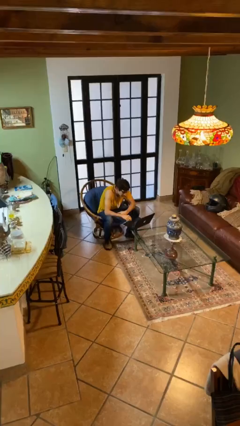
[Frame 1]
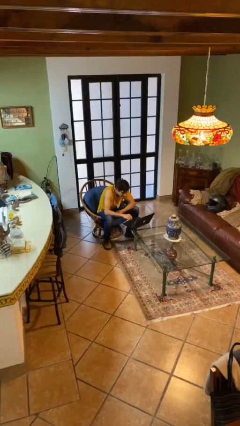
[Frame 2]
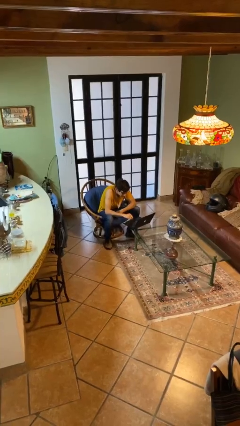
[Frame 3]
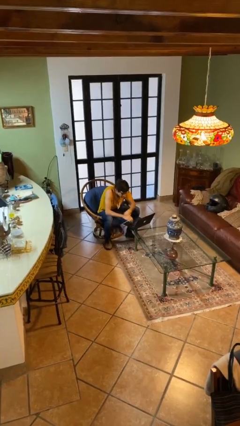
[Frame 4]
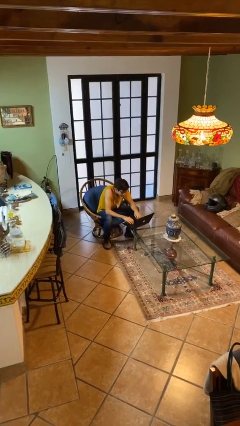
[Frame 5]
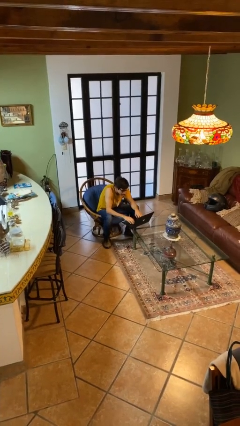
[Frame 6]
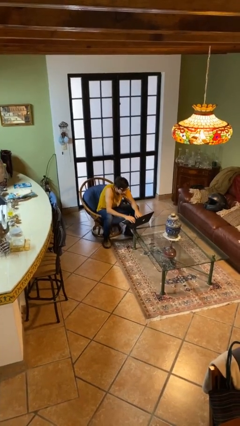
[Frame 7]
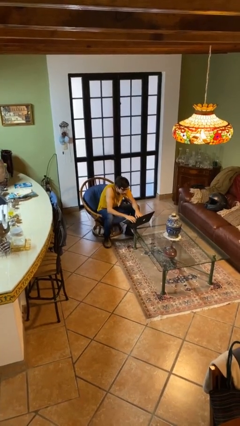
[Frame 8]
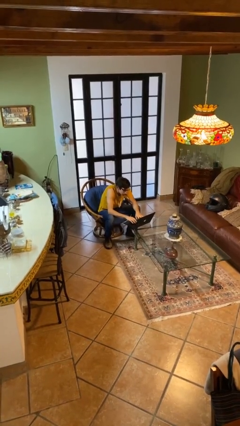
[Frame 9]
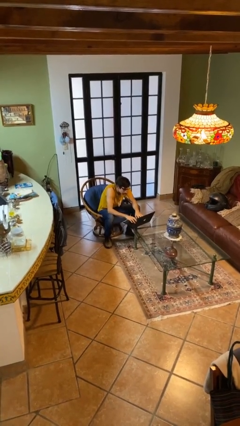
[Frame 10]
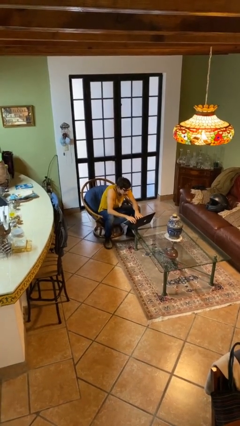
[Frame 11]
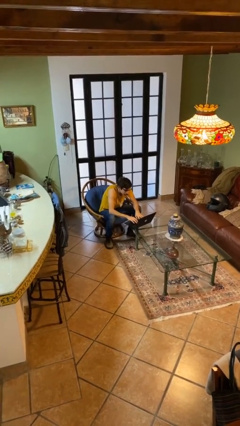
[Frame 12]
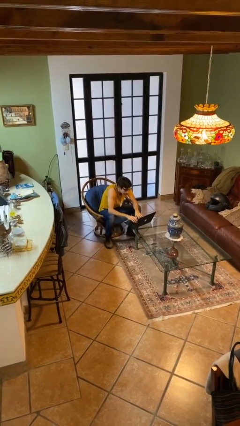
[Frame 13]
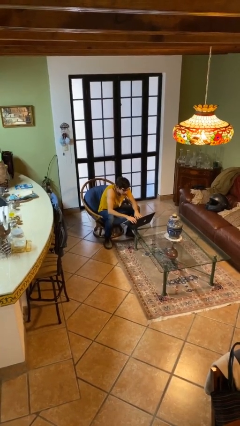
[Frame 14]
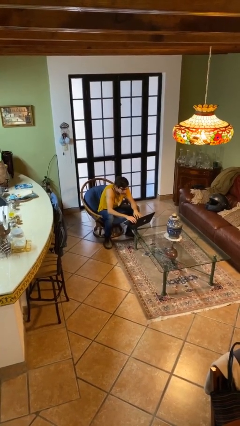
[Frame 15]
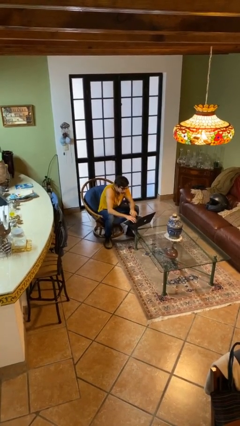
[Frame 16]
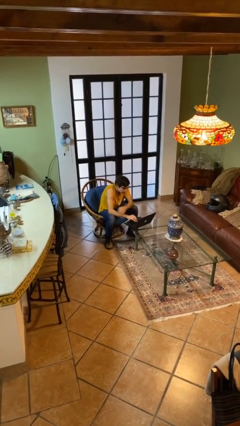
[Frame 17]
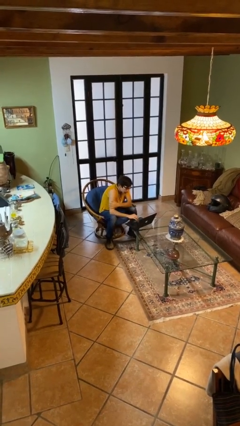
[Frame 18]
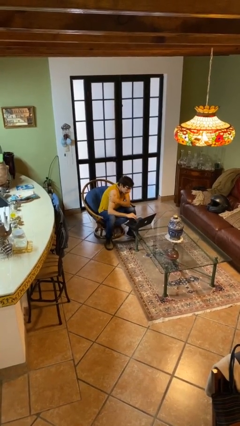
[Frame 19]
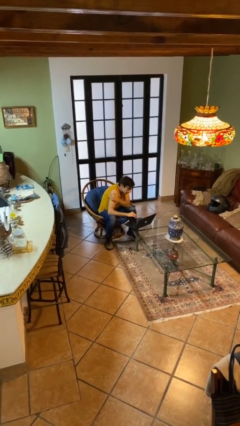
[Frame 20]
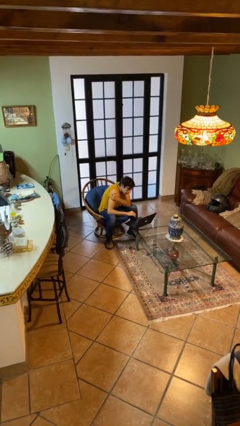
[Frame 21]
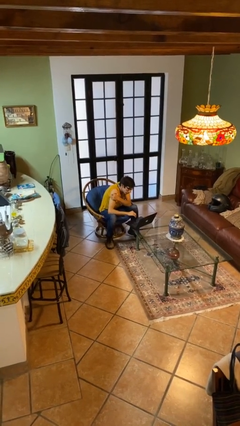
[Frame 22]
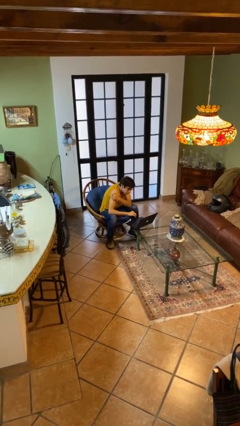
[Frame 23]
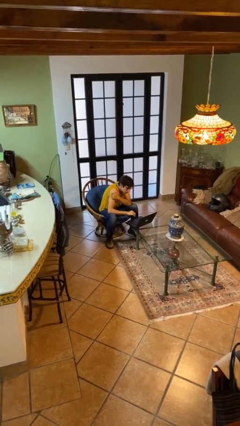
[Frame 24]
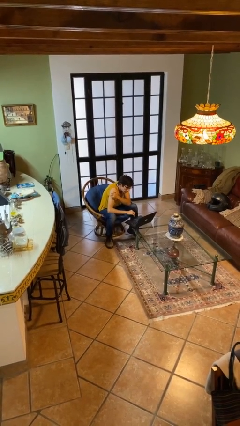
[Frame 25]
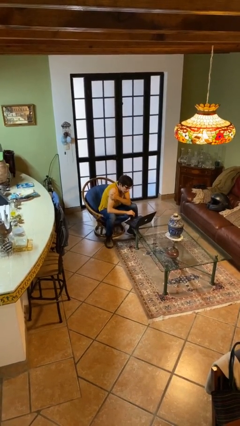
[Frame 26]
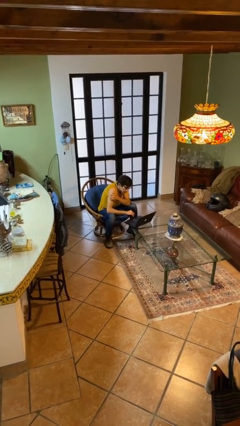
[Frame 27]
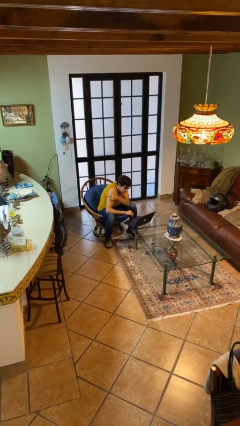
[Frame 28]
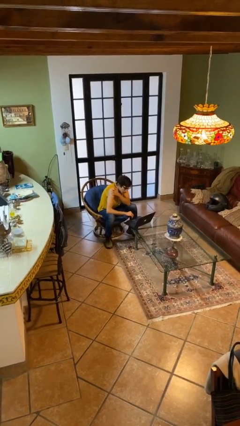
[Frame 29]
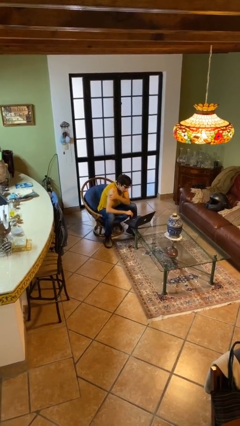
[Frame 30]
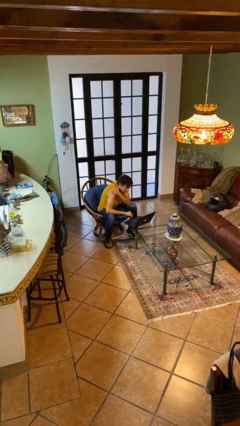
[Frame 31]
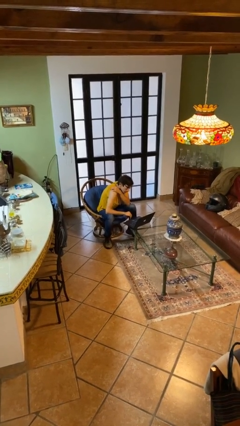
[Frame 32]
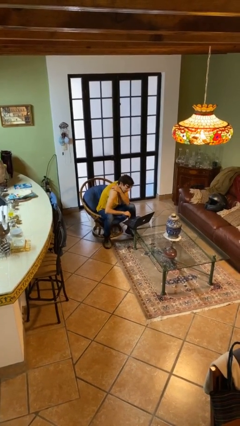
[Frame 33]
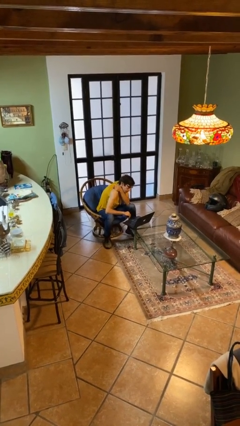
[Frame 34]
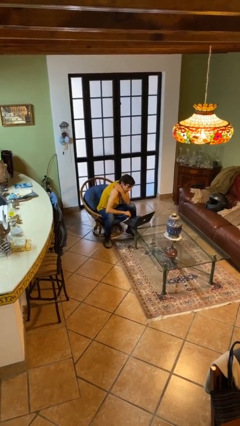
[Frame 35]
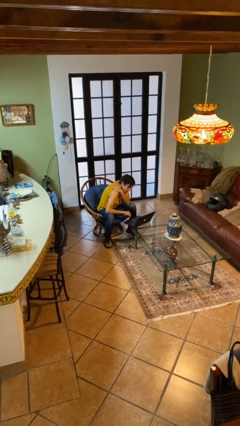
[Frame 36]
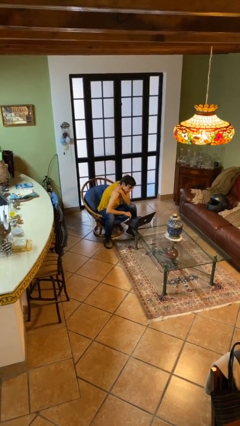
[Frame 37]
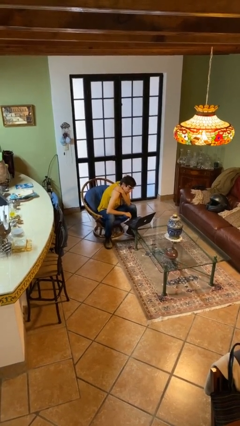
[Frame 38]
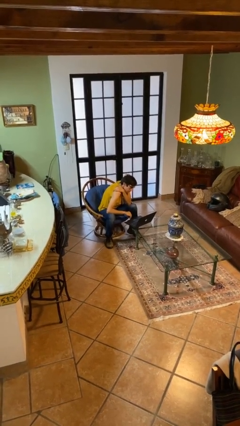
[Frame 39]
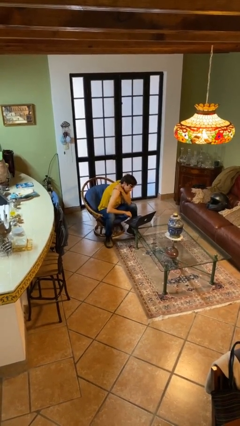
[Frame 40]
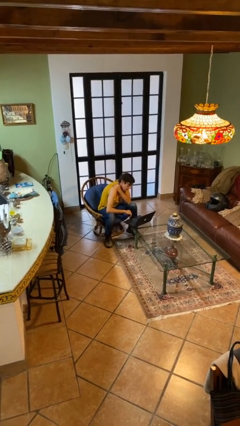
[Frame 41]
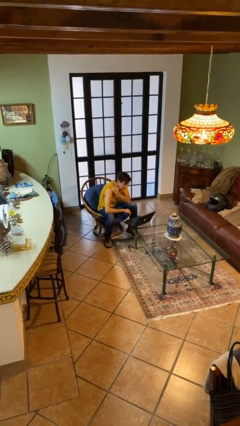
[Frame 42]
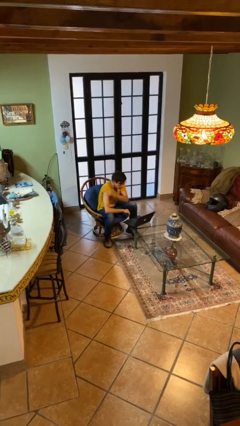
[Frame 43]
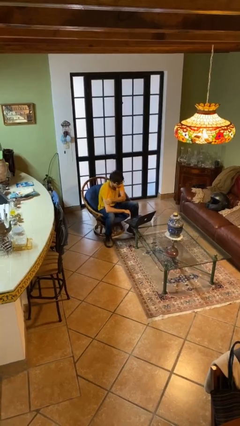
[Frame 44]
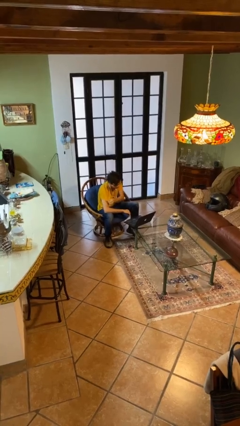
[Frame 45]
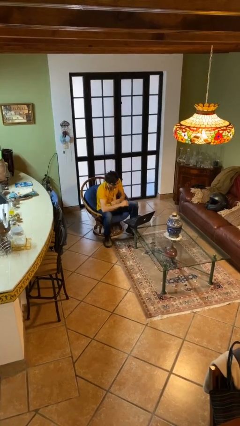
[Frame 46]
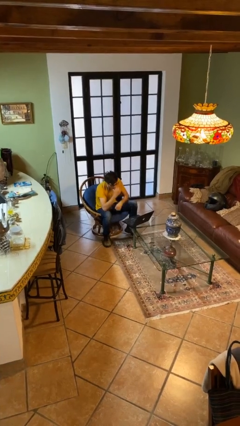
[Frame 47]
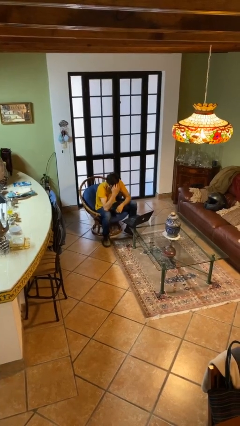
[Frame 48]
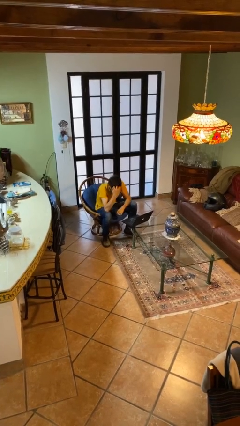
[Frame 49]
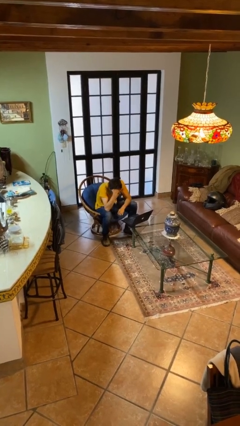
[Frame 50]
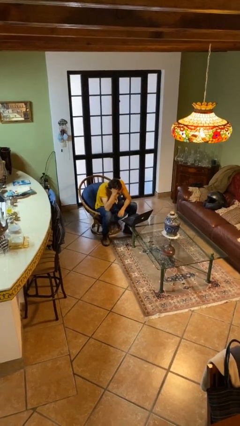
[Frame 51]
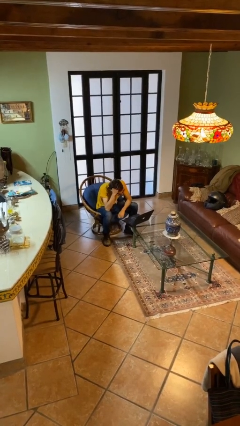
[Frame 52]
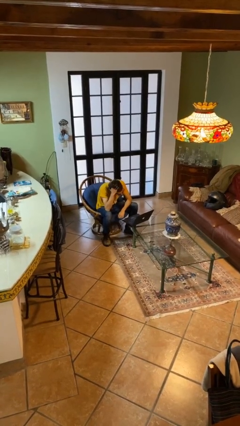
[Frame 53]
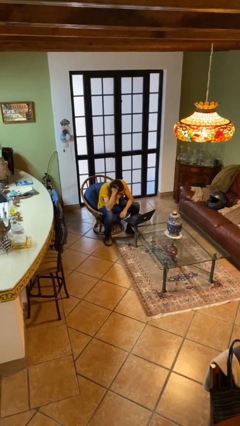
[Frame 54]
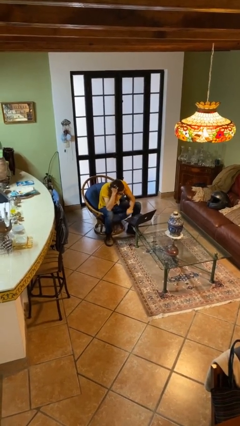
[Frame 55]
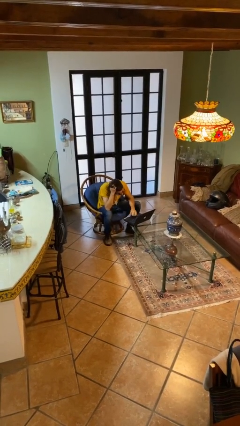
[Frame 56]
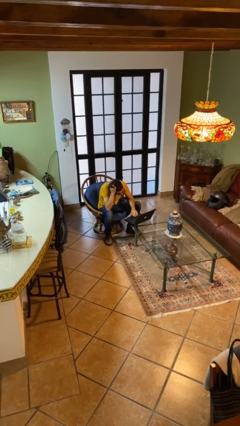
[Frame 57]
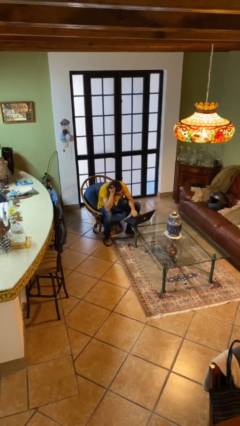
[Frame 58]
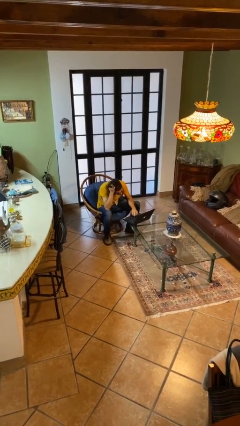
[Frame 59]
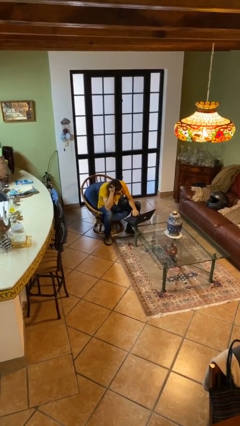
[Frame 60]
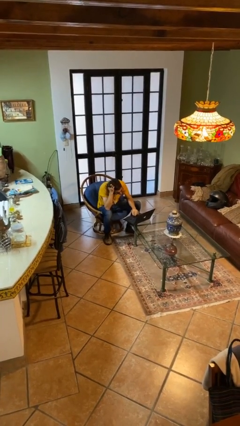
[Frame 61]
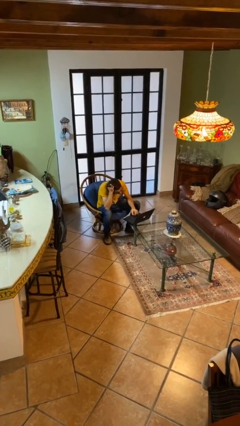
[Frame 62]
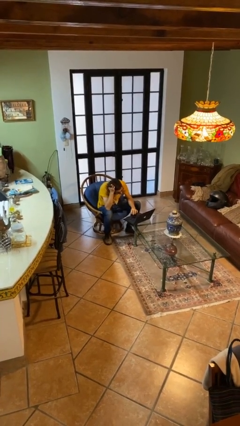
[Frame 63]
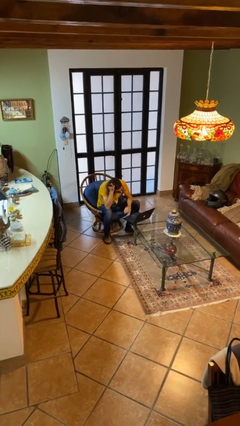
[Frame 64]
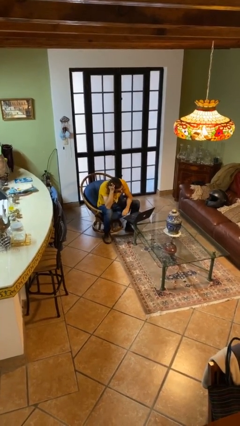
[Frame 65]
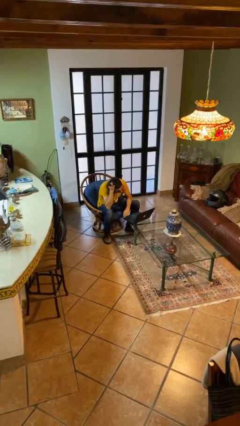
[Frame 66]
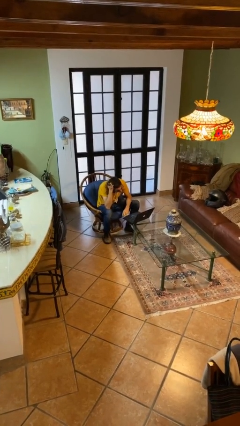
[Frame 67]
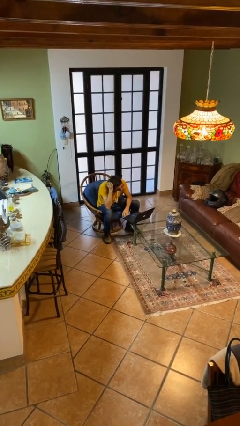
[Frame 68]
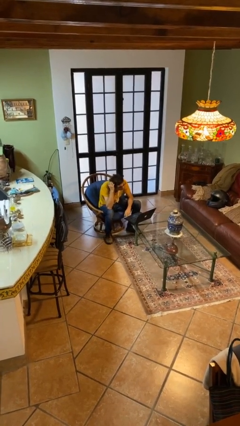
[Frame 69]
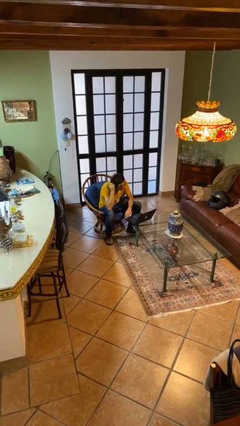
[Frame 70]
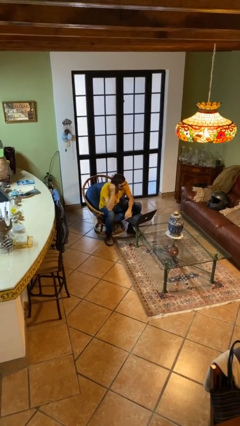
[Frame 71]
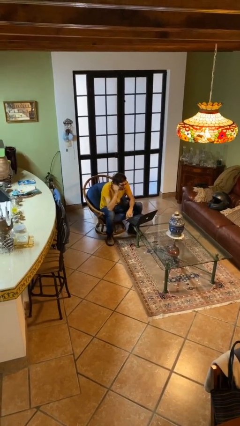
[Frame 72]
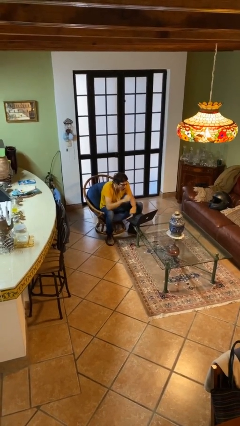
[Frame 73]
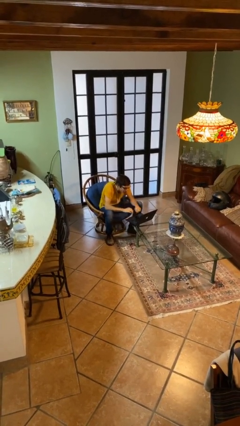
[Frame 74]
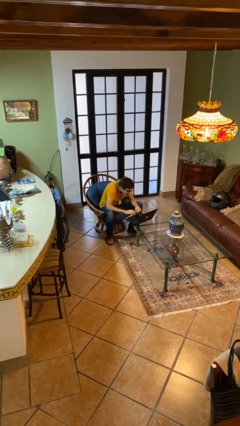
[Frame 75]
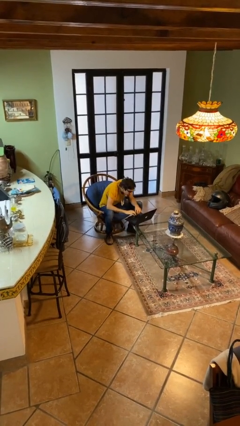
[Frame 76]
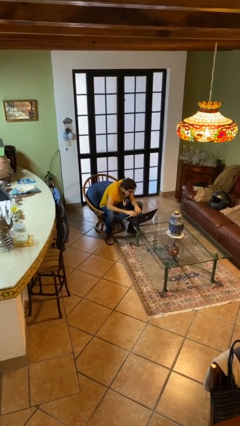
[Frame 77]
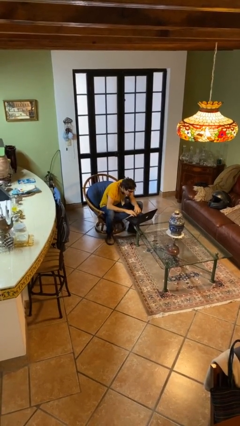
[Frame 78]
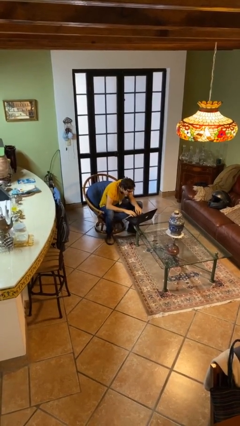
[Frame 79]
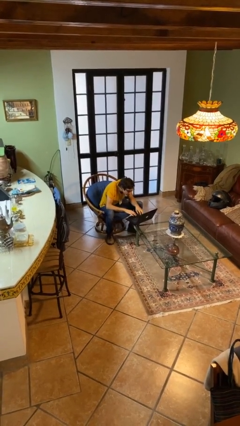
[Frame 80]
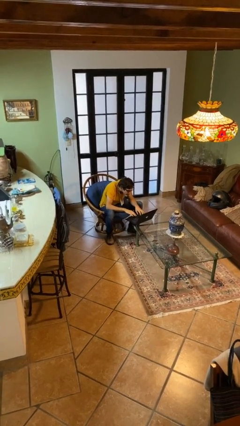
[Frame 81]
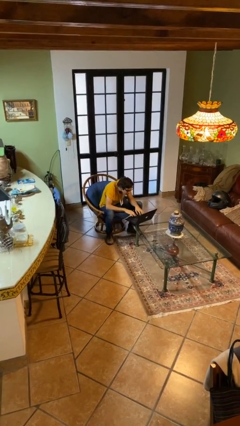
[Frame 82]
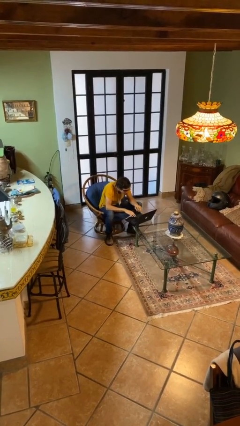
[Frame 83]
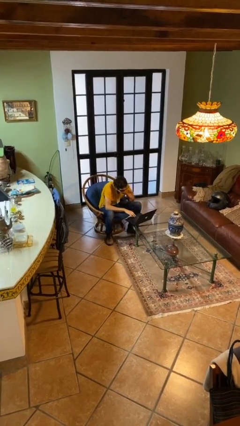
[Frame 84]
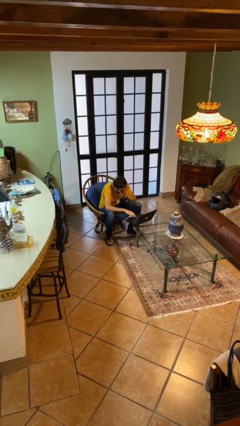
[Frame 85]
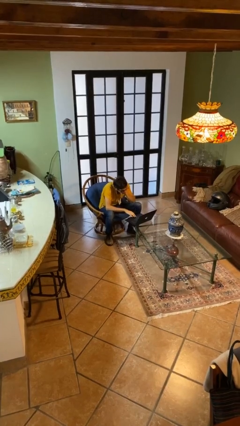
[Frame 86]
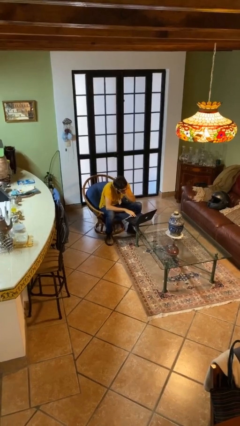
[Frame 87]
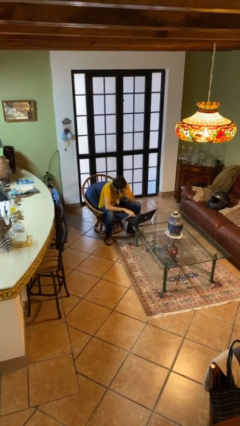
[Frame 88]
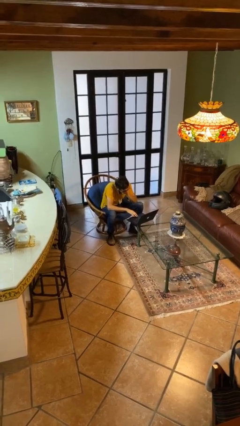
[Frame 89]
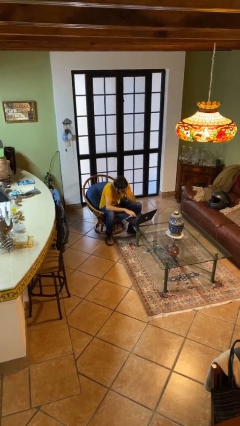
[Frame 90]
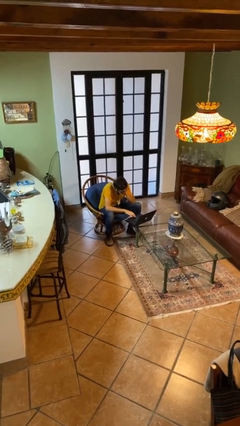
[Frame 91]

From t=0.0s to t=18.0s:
person interacts with laptop

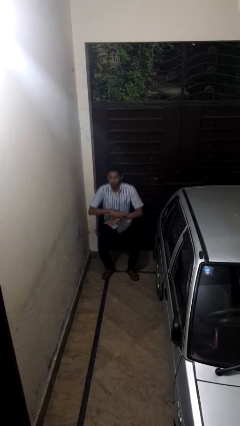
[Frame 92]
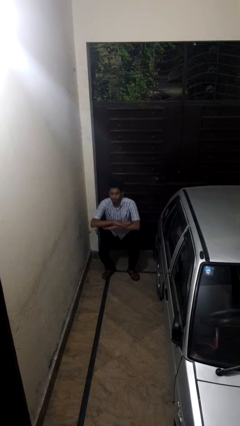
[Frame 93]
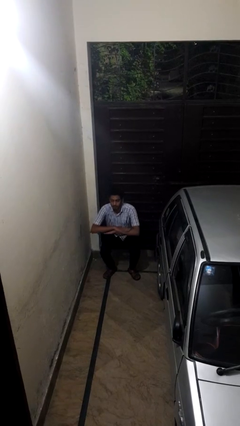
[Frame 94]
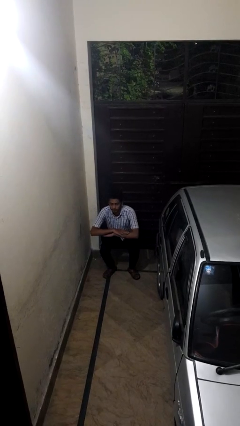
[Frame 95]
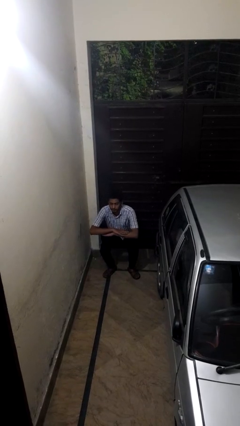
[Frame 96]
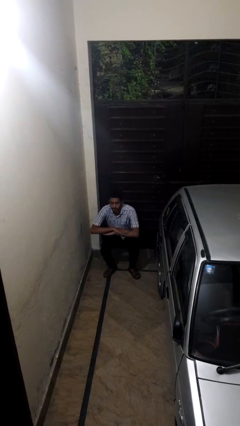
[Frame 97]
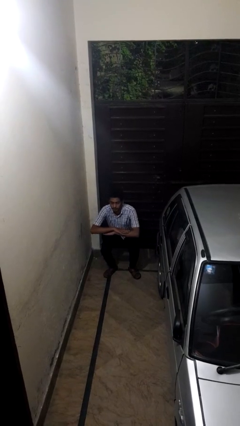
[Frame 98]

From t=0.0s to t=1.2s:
person squats
